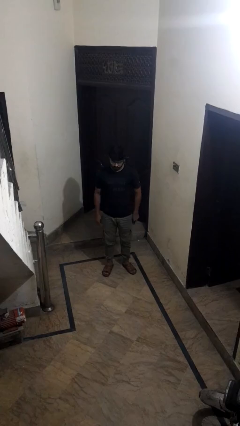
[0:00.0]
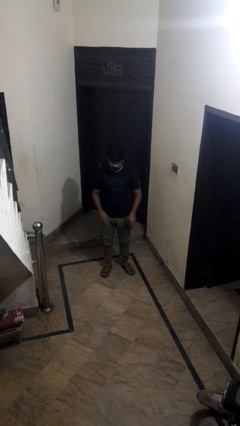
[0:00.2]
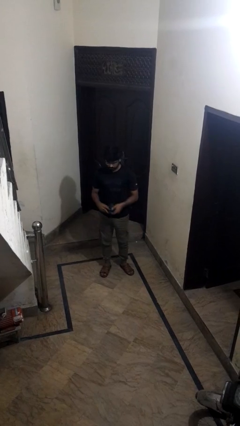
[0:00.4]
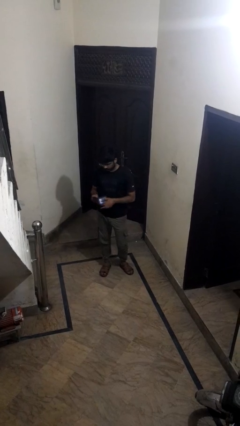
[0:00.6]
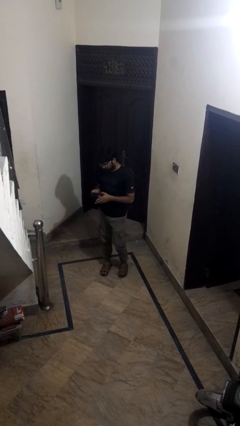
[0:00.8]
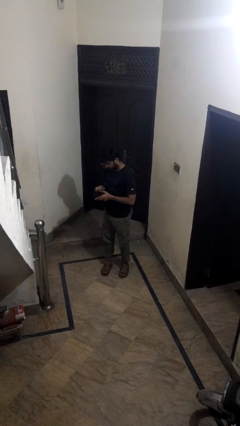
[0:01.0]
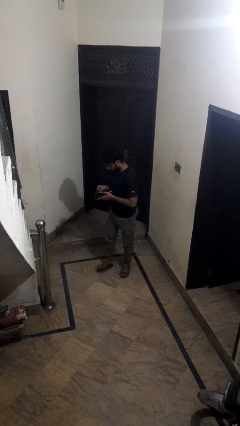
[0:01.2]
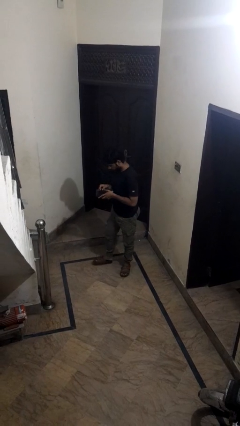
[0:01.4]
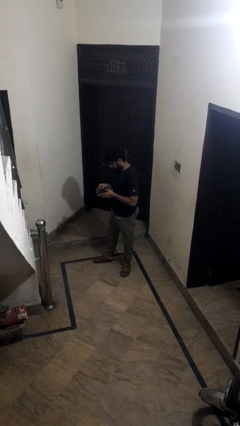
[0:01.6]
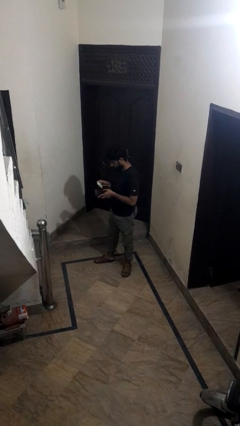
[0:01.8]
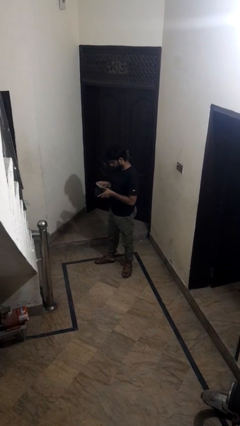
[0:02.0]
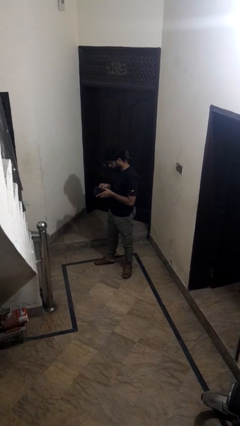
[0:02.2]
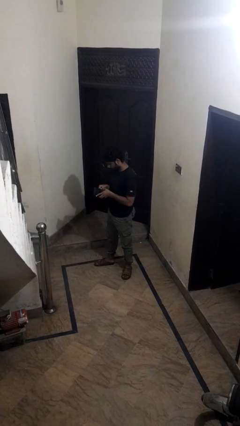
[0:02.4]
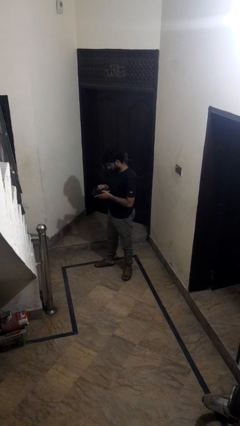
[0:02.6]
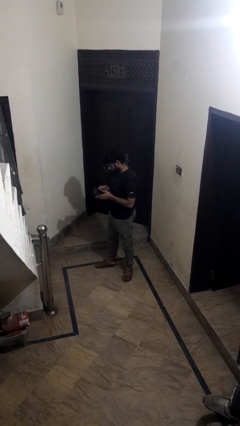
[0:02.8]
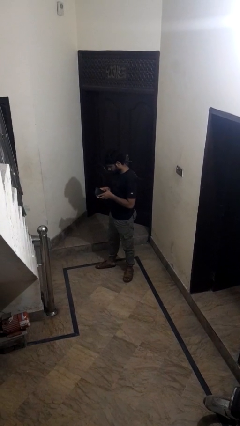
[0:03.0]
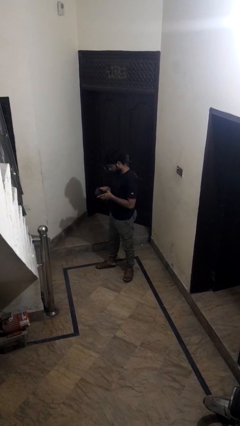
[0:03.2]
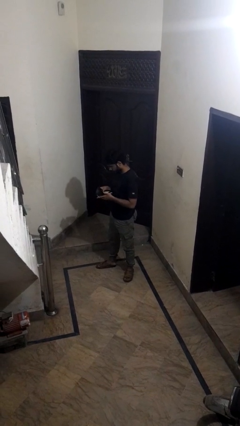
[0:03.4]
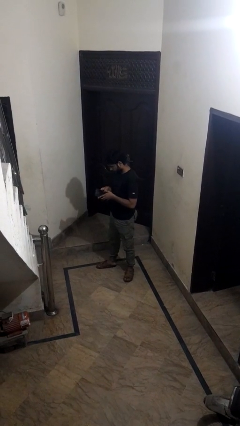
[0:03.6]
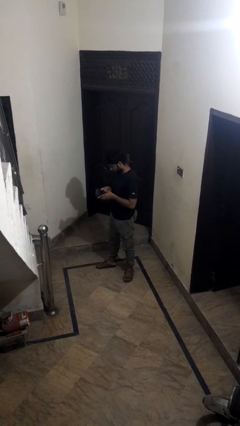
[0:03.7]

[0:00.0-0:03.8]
person searches in purse

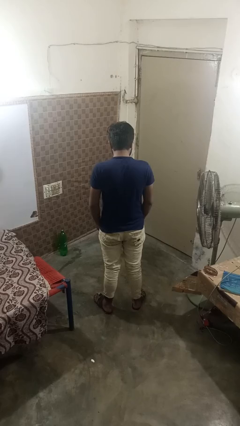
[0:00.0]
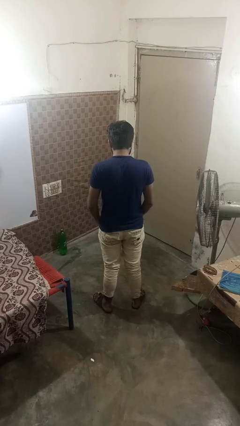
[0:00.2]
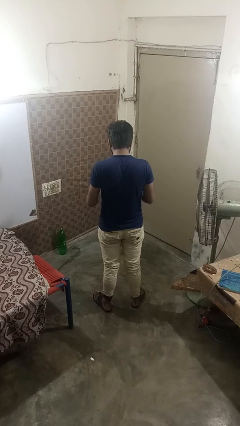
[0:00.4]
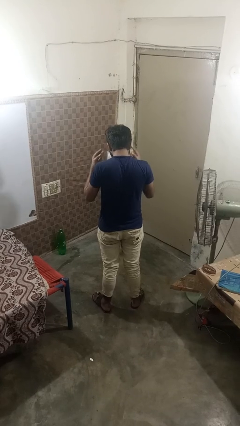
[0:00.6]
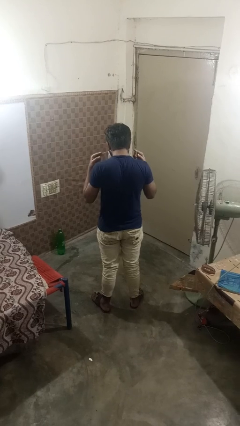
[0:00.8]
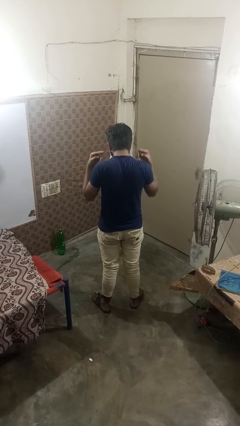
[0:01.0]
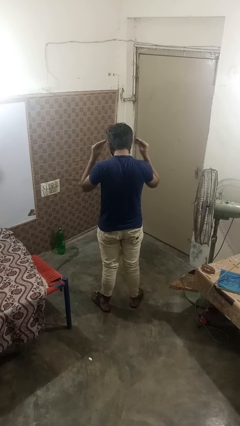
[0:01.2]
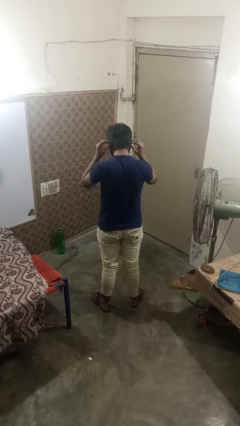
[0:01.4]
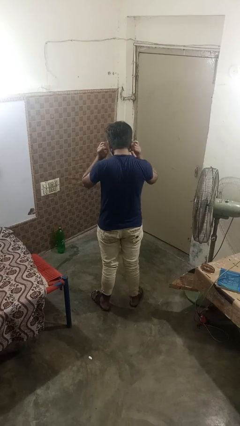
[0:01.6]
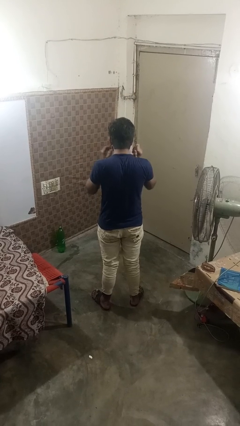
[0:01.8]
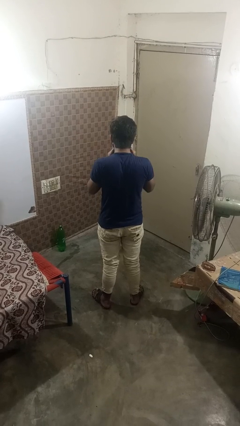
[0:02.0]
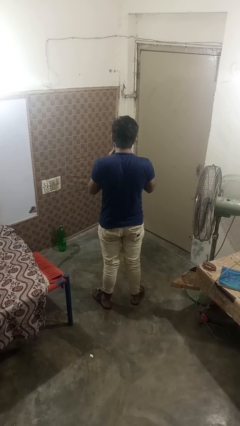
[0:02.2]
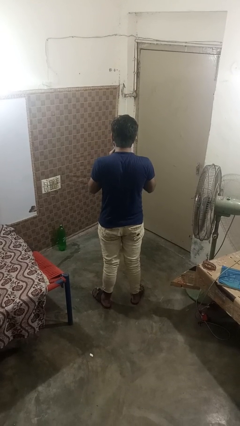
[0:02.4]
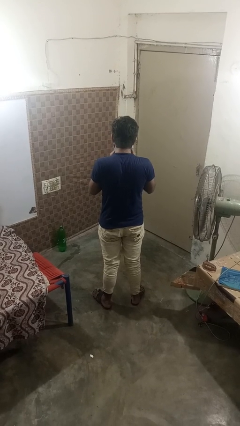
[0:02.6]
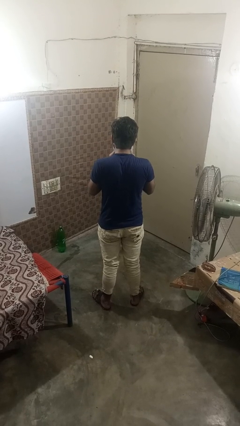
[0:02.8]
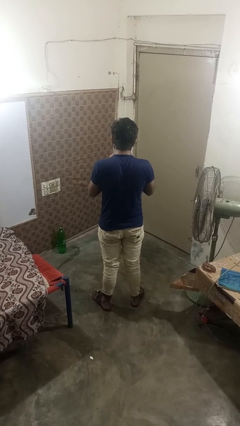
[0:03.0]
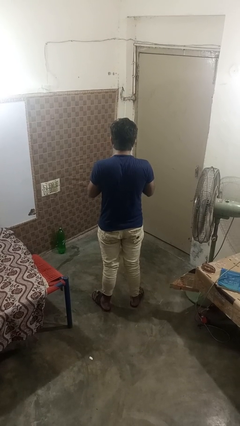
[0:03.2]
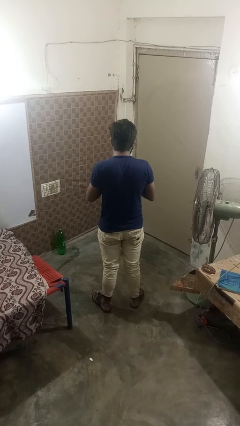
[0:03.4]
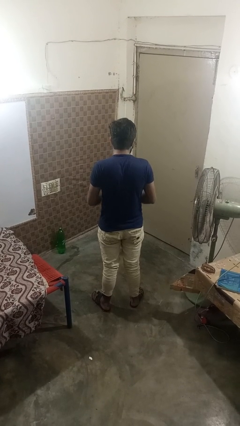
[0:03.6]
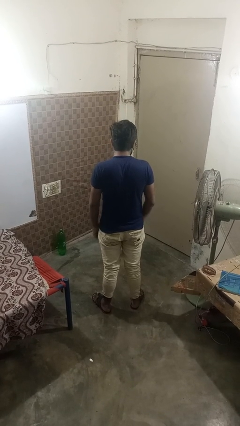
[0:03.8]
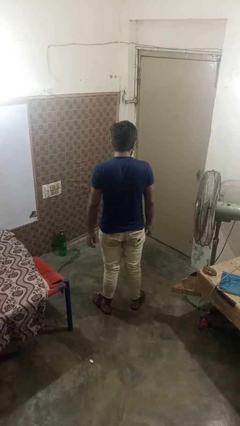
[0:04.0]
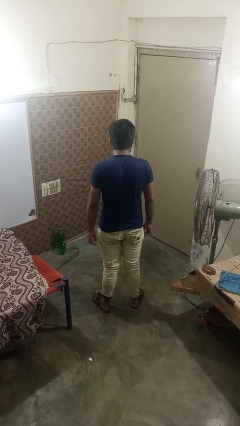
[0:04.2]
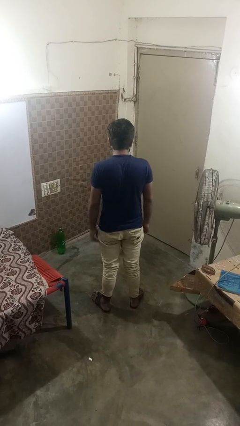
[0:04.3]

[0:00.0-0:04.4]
person puts on facemask

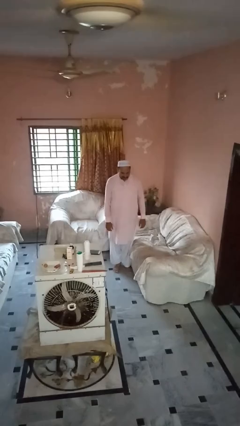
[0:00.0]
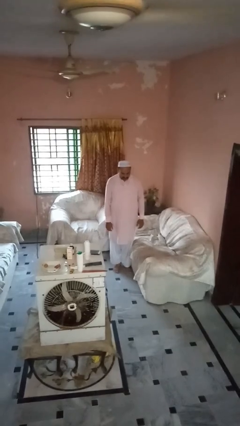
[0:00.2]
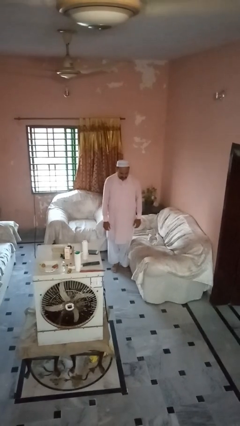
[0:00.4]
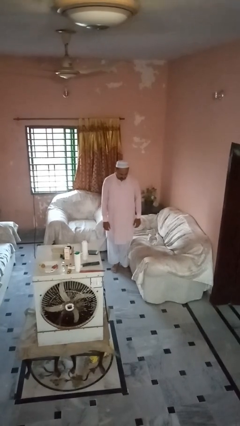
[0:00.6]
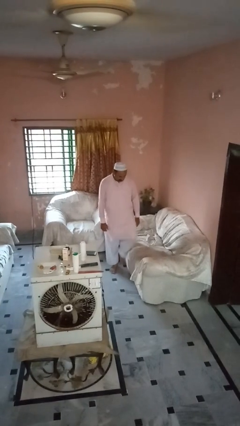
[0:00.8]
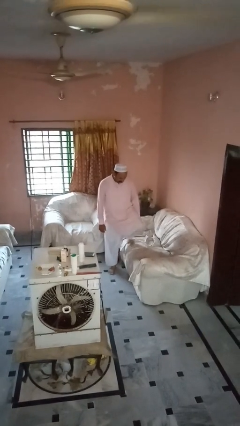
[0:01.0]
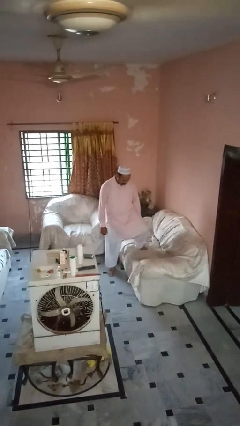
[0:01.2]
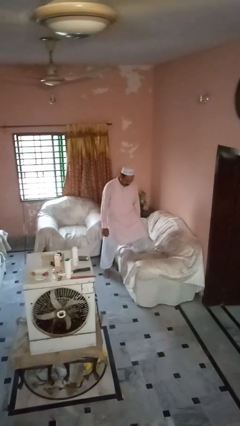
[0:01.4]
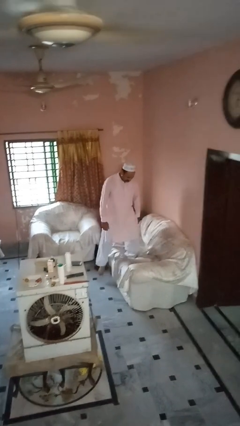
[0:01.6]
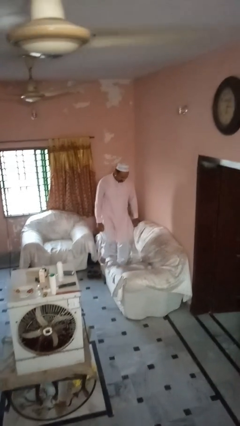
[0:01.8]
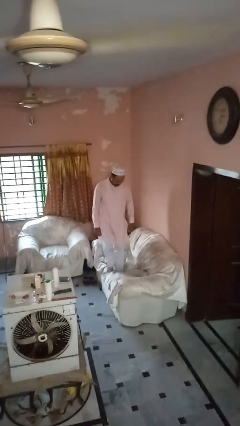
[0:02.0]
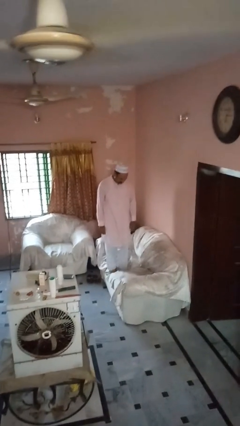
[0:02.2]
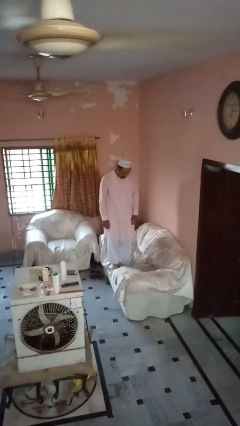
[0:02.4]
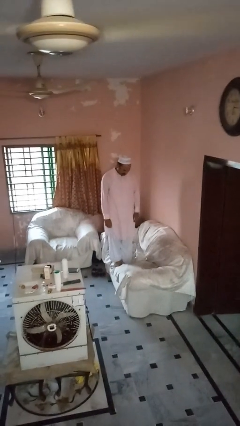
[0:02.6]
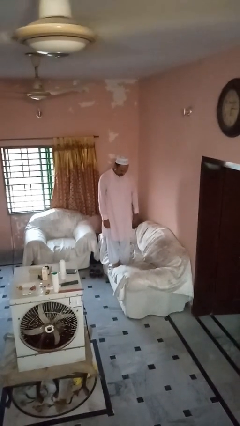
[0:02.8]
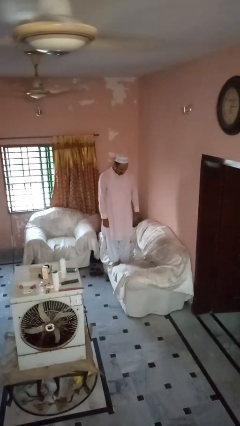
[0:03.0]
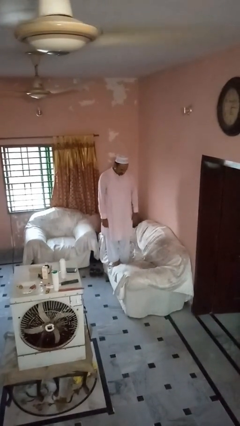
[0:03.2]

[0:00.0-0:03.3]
person climbs on couch

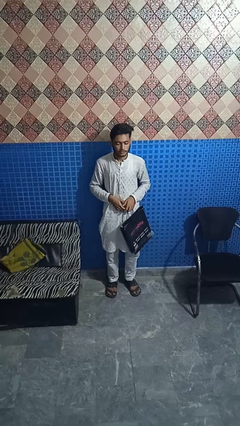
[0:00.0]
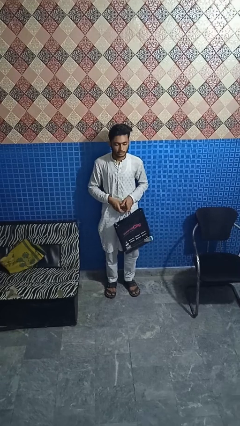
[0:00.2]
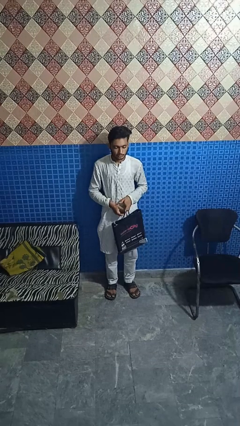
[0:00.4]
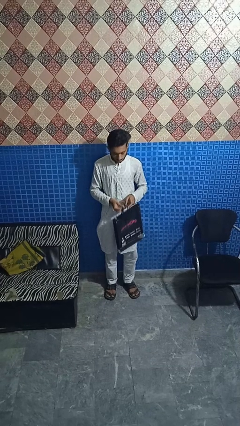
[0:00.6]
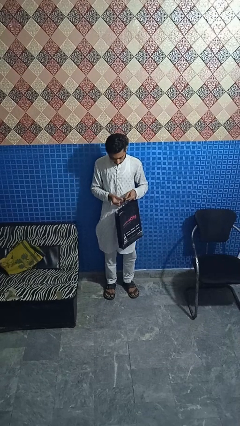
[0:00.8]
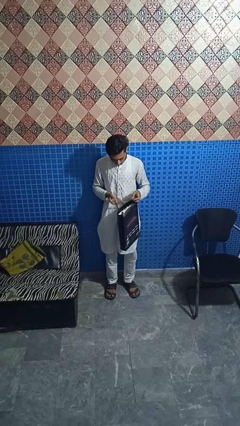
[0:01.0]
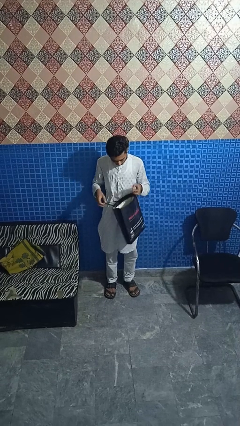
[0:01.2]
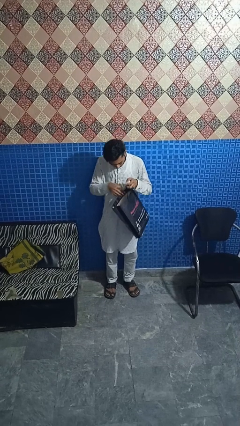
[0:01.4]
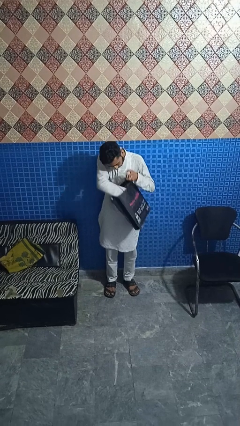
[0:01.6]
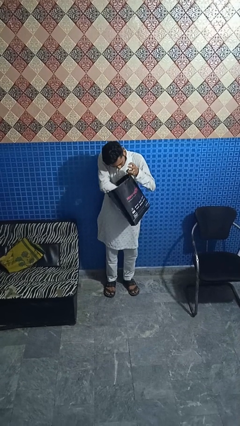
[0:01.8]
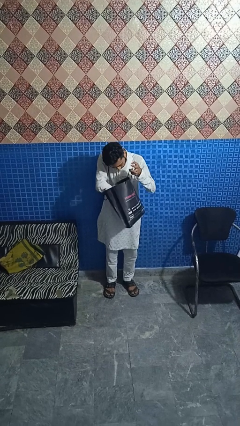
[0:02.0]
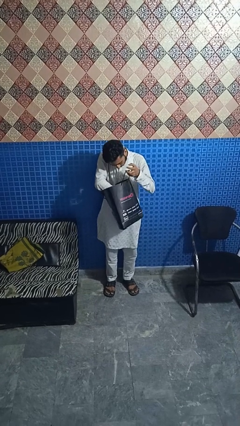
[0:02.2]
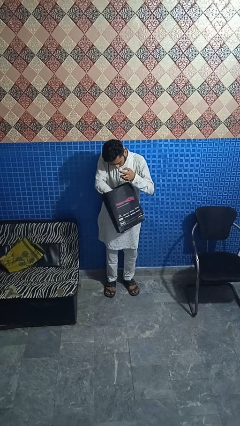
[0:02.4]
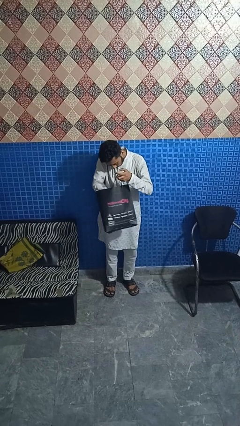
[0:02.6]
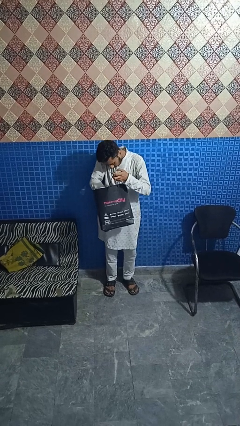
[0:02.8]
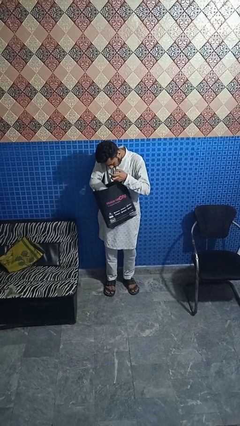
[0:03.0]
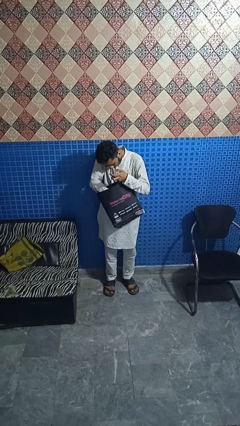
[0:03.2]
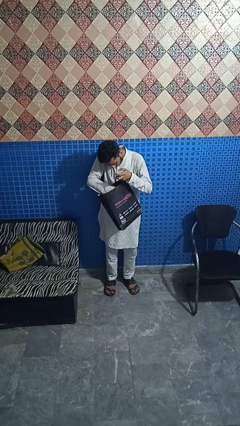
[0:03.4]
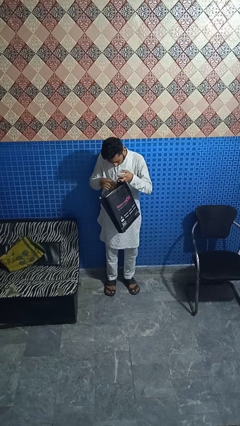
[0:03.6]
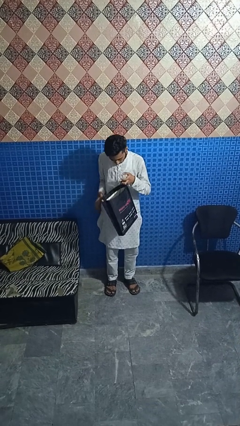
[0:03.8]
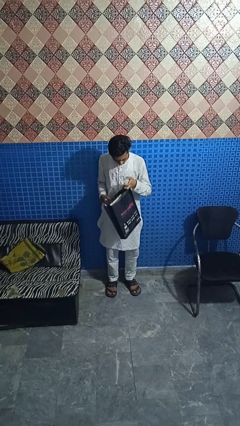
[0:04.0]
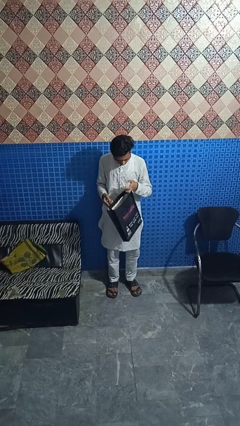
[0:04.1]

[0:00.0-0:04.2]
person searches in bag

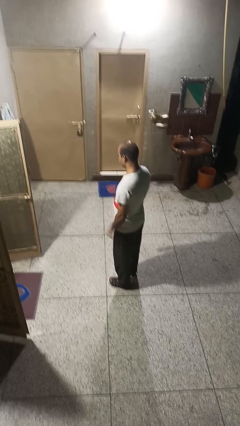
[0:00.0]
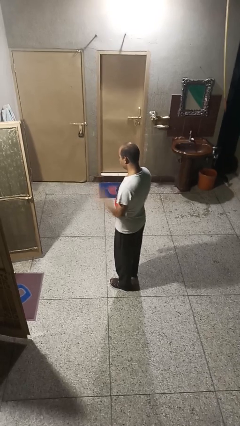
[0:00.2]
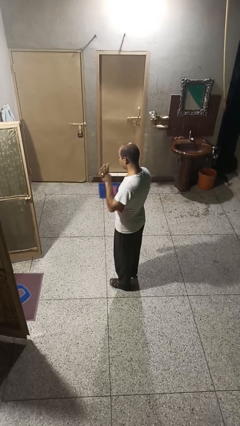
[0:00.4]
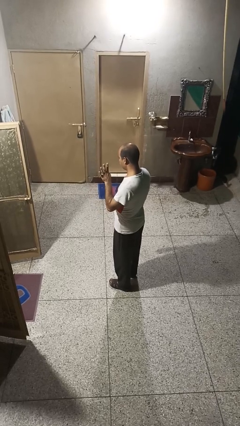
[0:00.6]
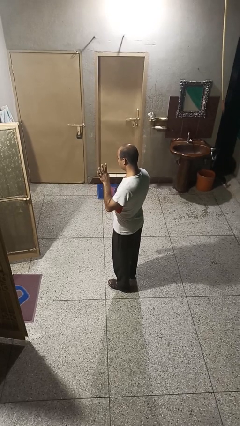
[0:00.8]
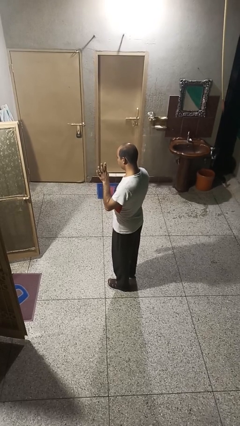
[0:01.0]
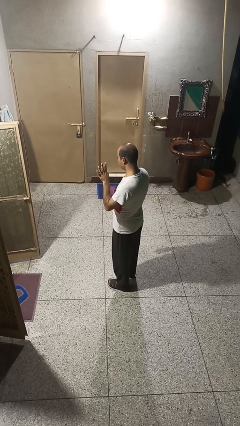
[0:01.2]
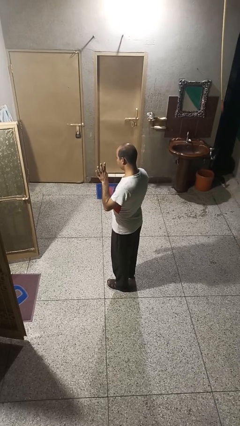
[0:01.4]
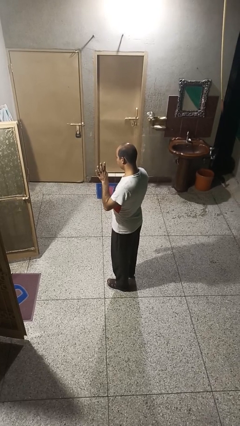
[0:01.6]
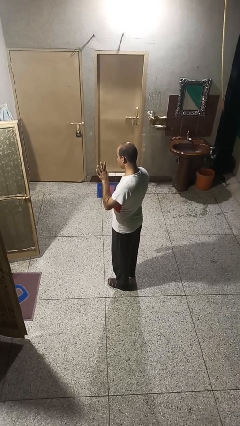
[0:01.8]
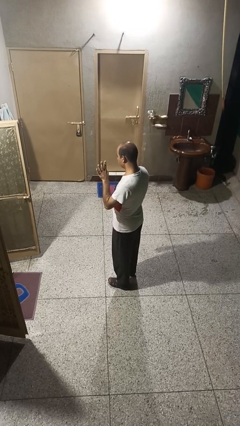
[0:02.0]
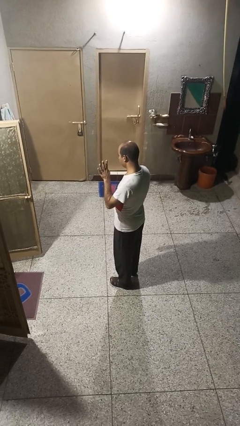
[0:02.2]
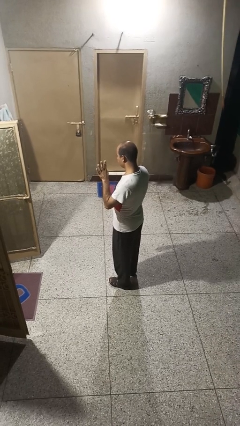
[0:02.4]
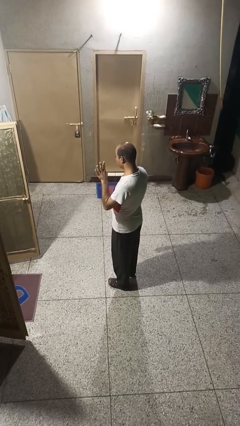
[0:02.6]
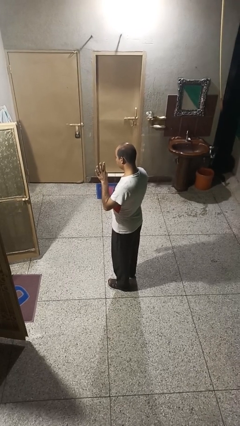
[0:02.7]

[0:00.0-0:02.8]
person gestures number four
